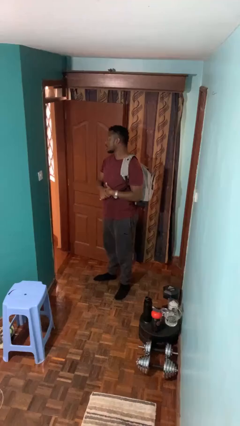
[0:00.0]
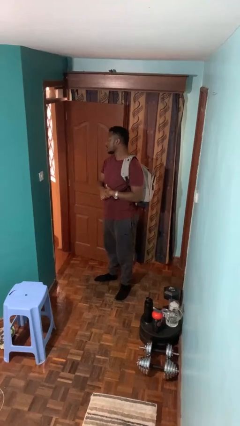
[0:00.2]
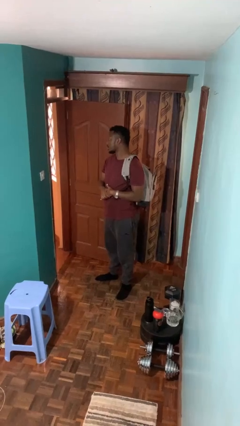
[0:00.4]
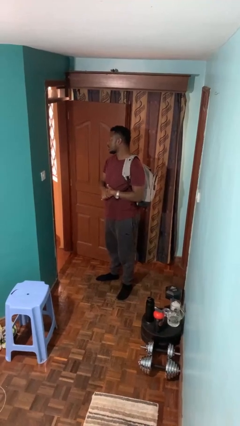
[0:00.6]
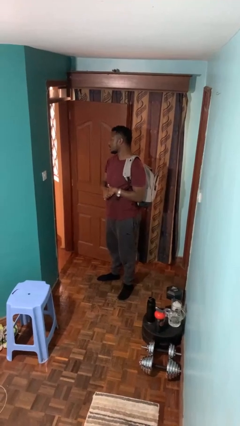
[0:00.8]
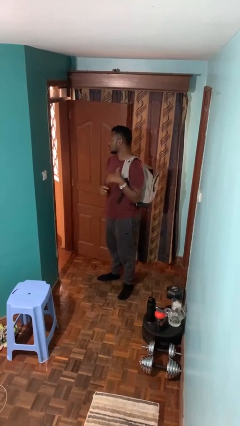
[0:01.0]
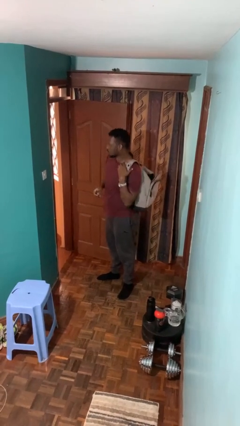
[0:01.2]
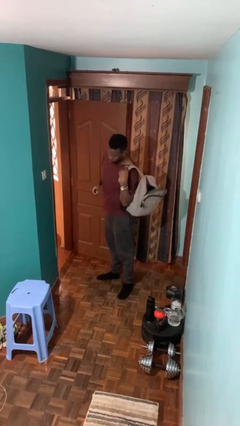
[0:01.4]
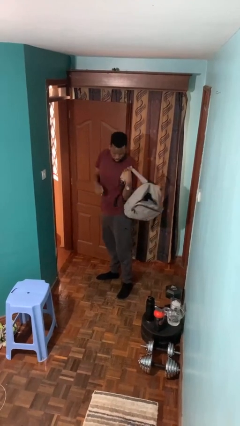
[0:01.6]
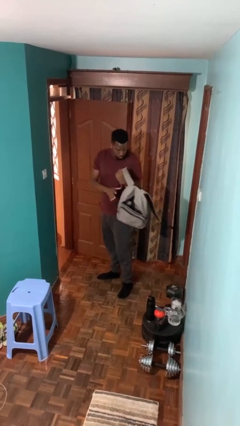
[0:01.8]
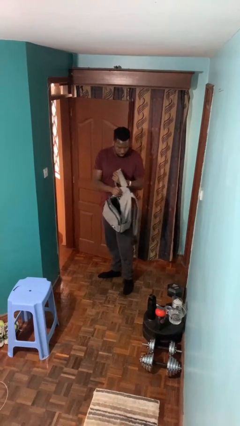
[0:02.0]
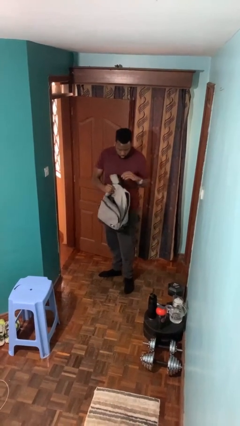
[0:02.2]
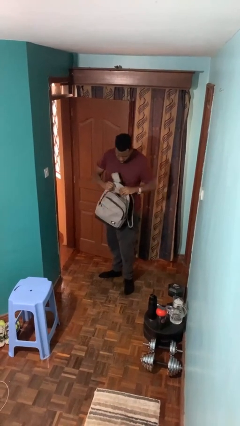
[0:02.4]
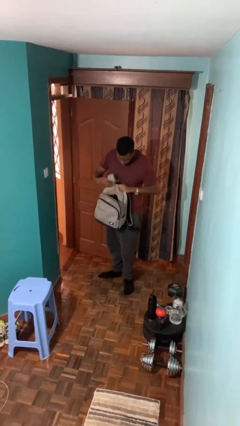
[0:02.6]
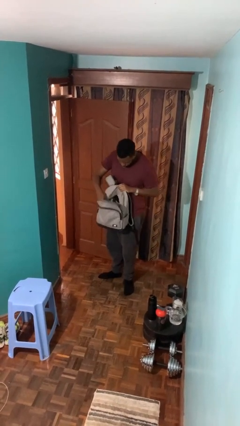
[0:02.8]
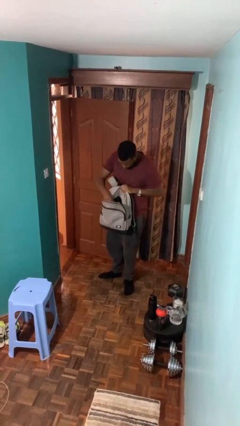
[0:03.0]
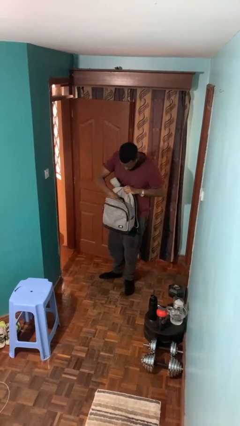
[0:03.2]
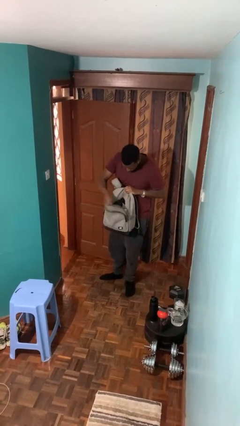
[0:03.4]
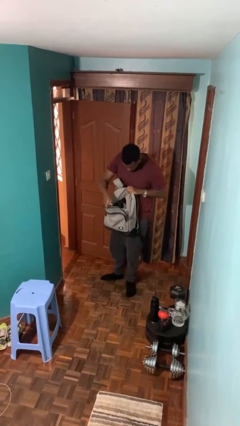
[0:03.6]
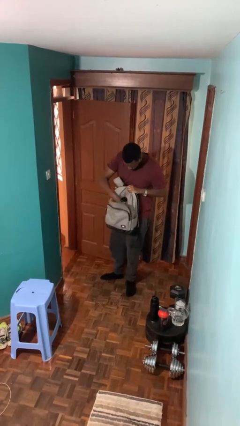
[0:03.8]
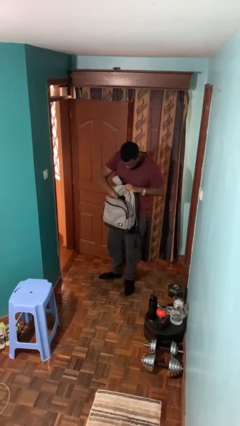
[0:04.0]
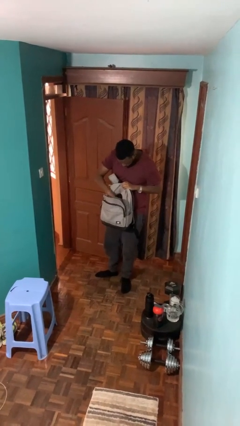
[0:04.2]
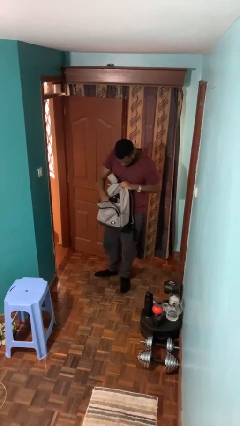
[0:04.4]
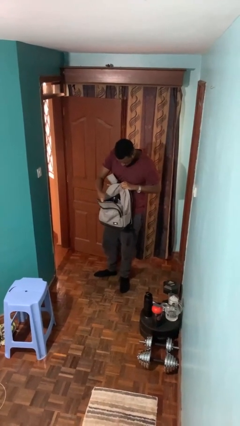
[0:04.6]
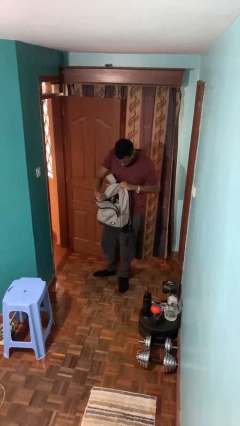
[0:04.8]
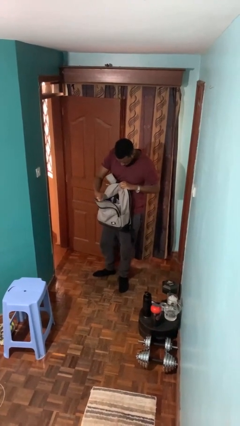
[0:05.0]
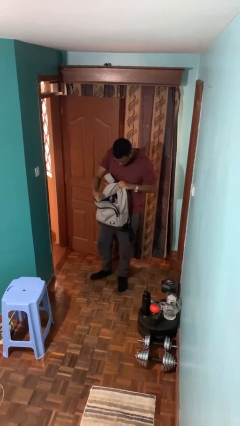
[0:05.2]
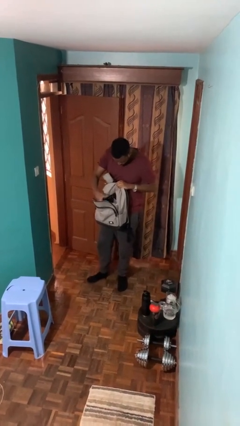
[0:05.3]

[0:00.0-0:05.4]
person searches in backpack

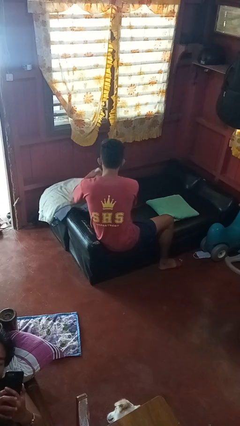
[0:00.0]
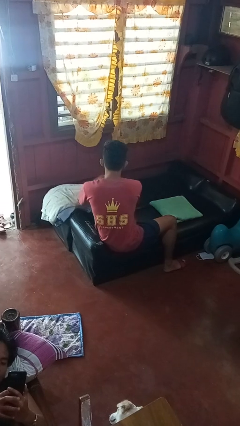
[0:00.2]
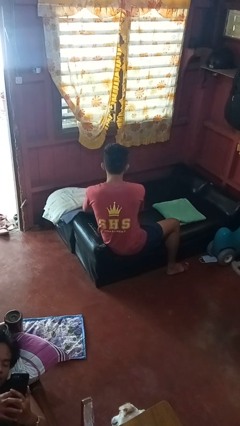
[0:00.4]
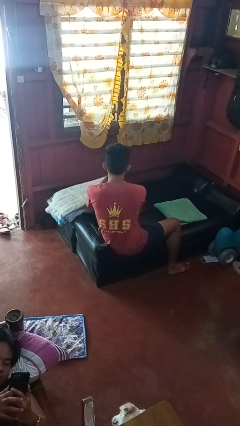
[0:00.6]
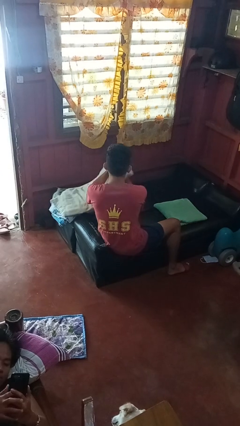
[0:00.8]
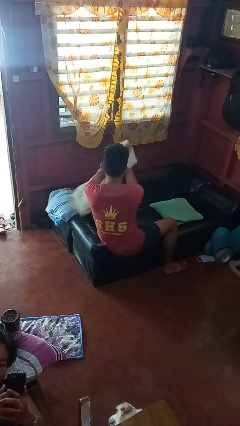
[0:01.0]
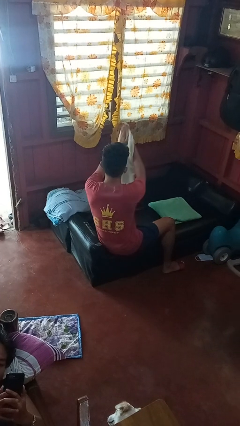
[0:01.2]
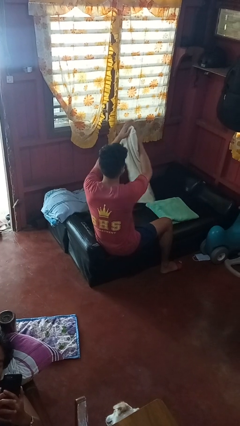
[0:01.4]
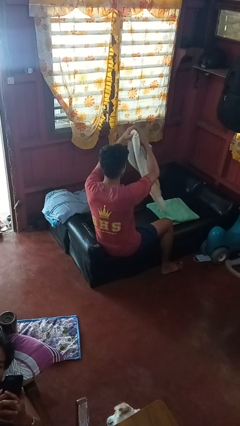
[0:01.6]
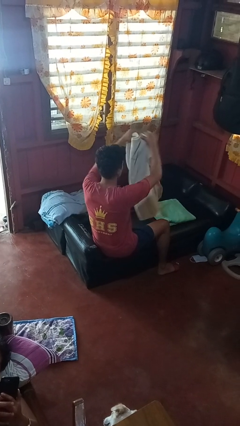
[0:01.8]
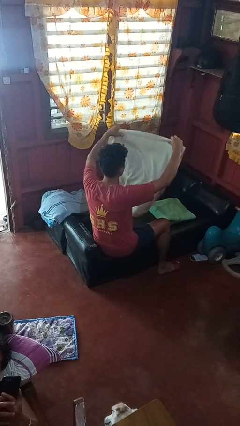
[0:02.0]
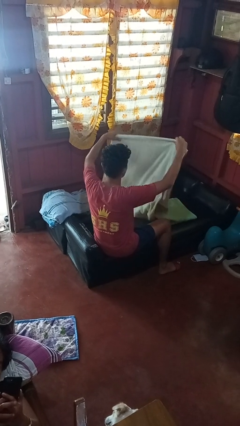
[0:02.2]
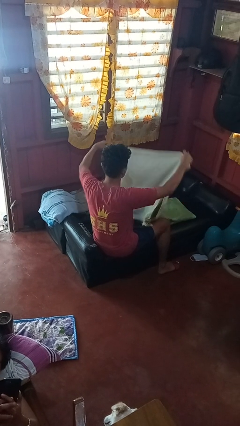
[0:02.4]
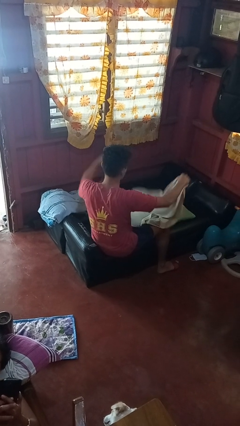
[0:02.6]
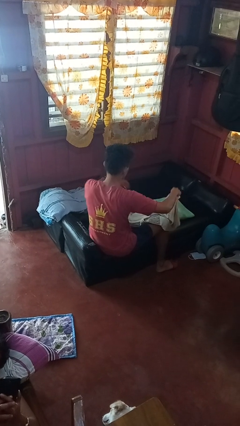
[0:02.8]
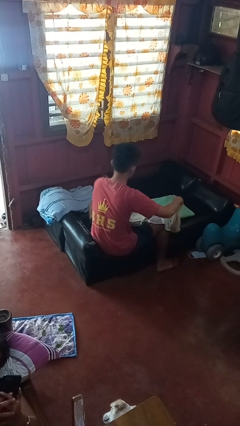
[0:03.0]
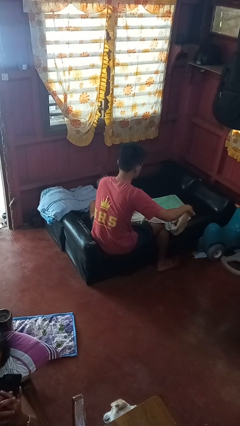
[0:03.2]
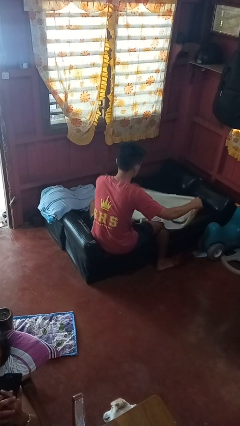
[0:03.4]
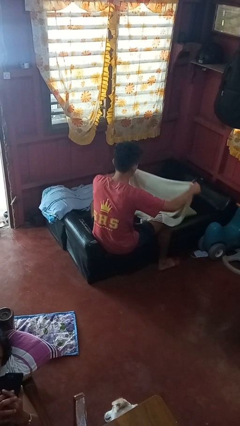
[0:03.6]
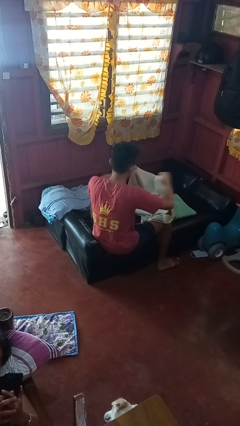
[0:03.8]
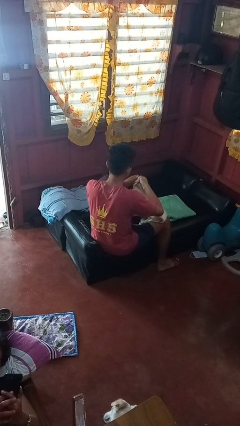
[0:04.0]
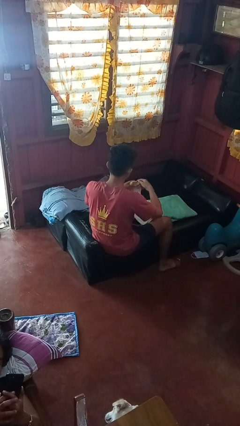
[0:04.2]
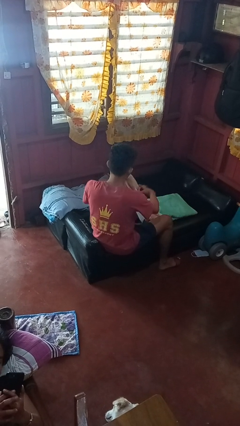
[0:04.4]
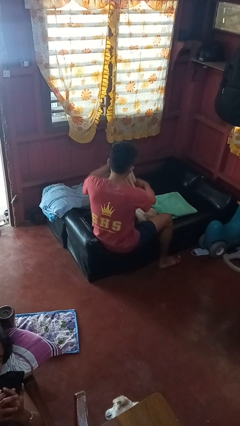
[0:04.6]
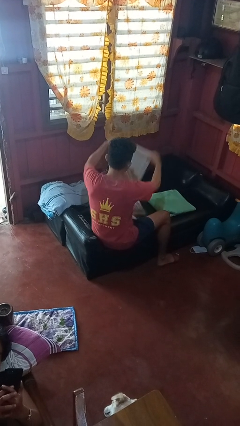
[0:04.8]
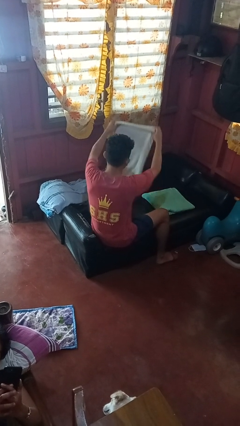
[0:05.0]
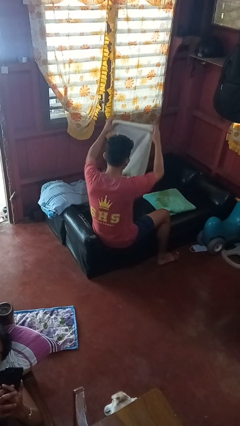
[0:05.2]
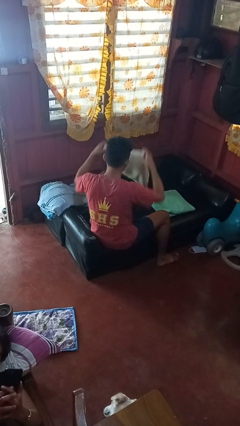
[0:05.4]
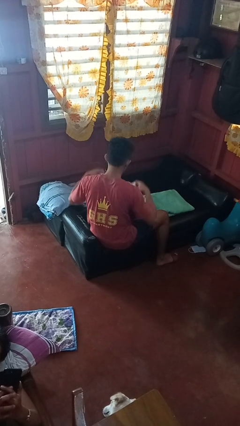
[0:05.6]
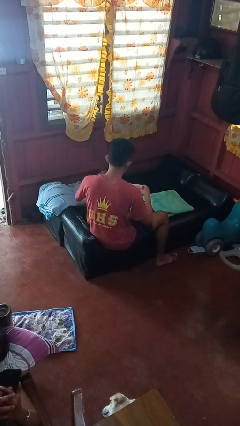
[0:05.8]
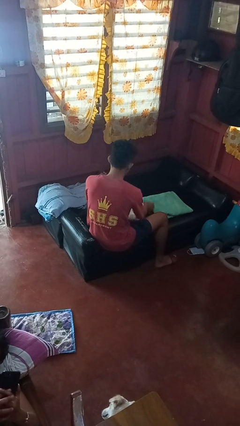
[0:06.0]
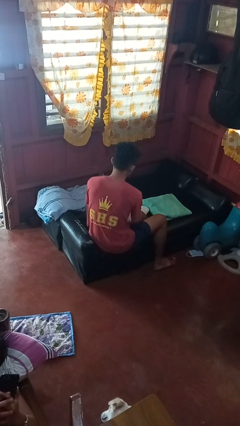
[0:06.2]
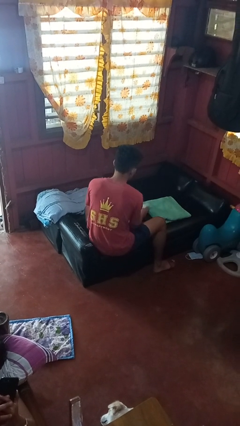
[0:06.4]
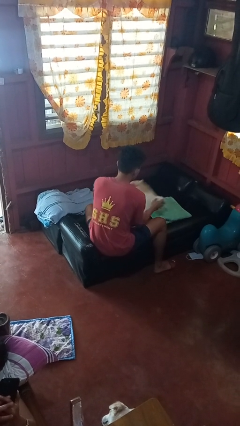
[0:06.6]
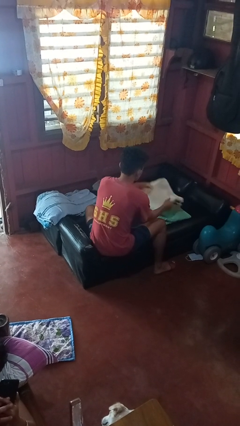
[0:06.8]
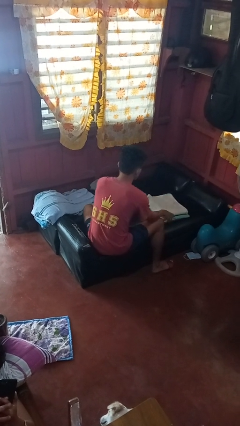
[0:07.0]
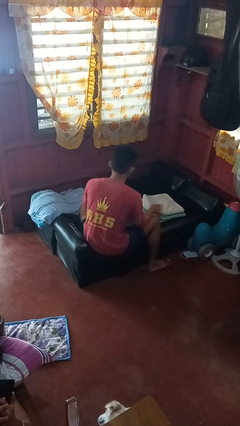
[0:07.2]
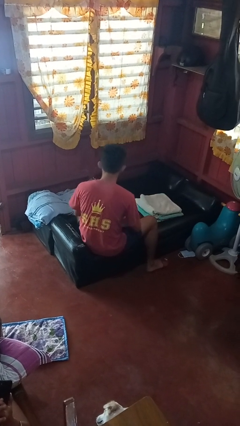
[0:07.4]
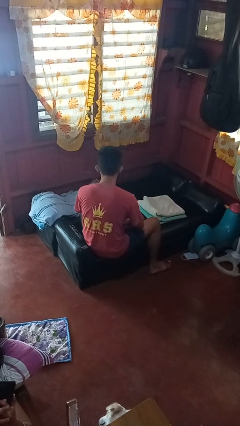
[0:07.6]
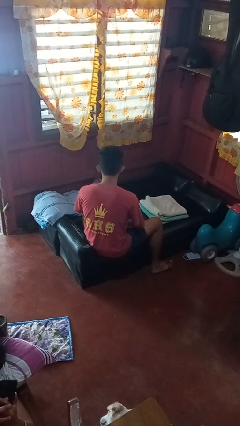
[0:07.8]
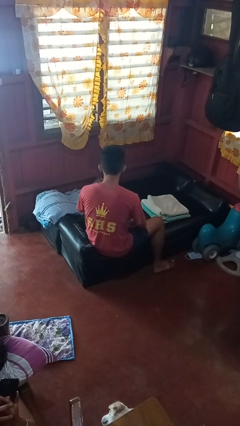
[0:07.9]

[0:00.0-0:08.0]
person folds towel

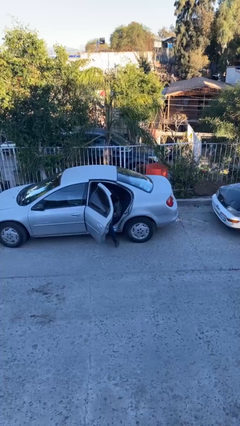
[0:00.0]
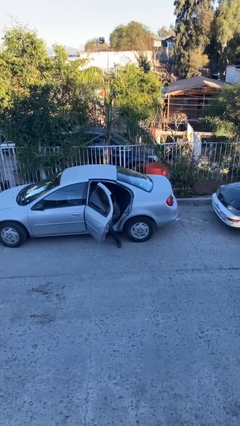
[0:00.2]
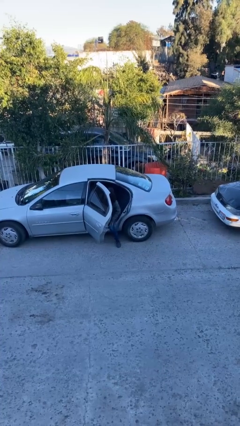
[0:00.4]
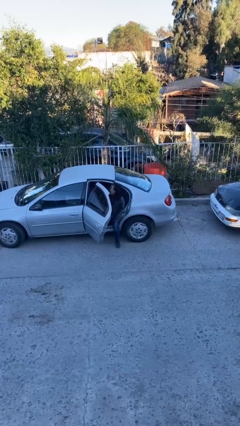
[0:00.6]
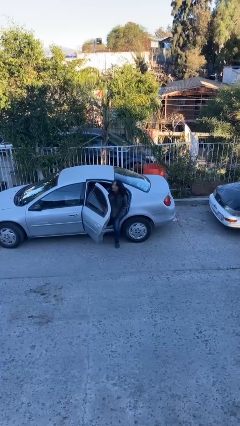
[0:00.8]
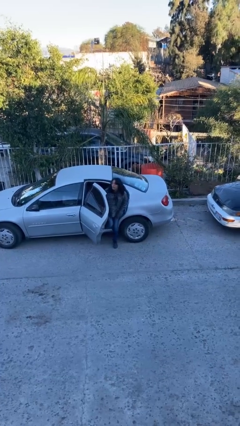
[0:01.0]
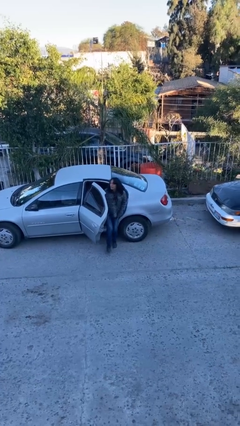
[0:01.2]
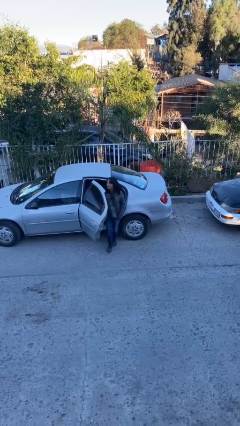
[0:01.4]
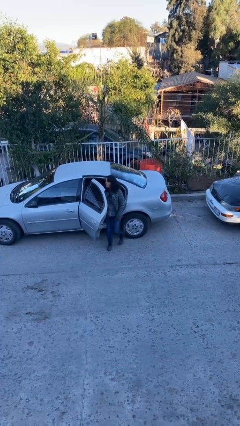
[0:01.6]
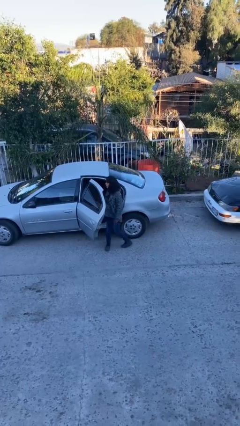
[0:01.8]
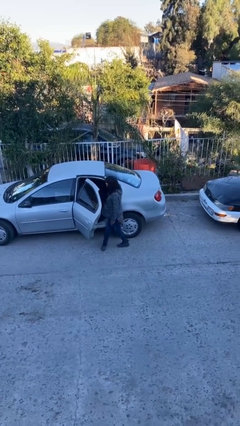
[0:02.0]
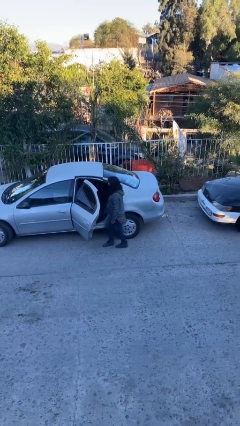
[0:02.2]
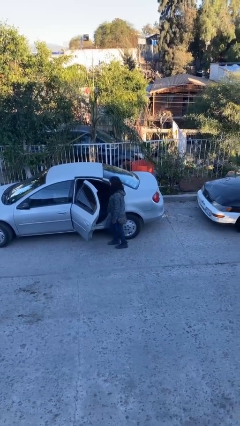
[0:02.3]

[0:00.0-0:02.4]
person exits car

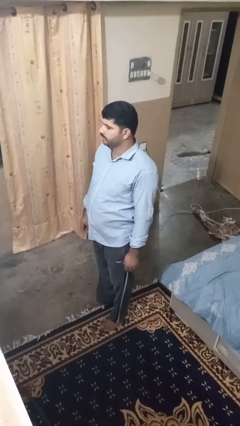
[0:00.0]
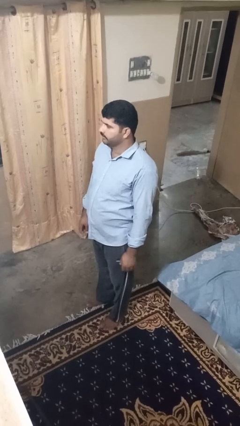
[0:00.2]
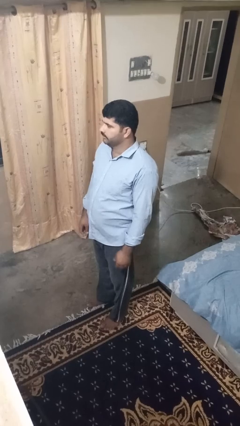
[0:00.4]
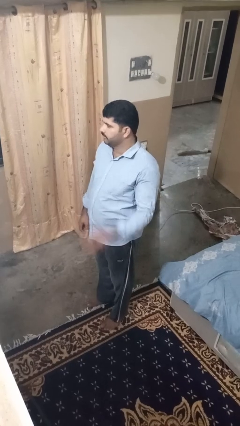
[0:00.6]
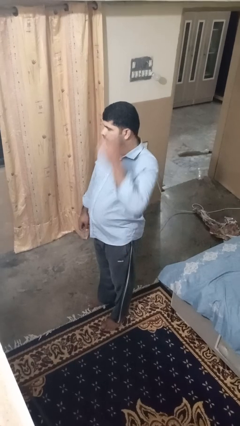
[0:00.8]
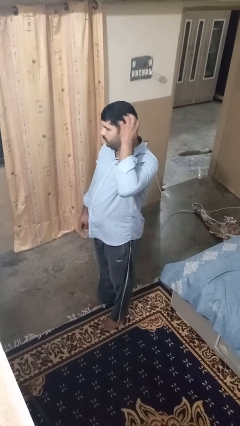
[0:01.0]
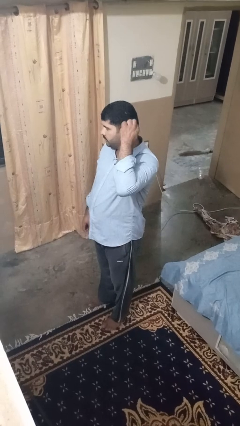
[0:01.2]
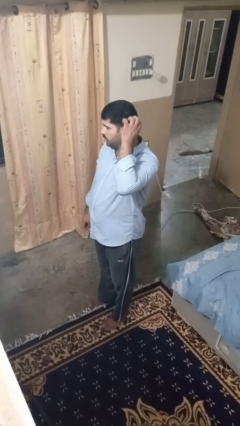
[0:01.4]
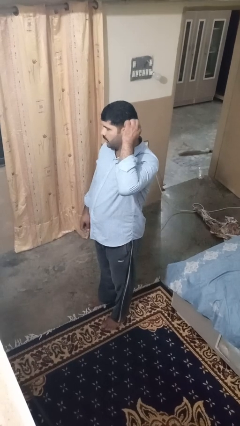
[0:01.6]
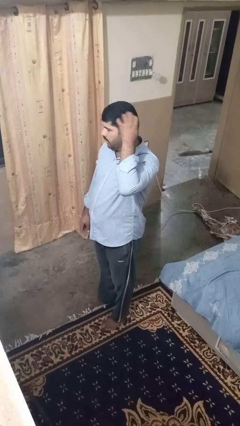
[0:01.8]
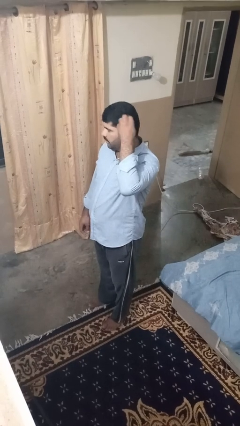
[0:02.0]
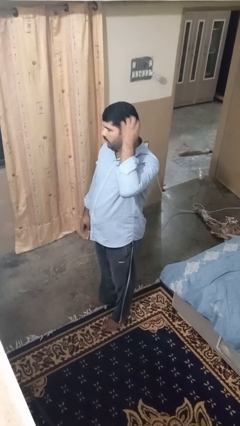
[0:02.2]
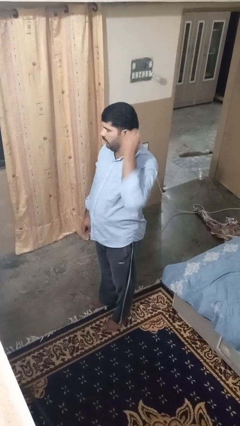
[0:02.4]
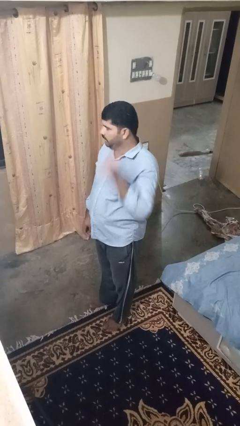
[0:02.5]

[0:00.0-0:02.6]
person strokes hair
